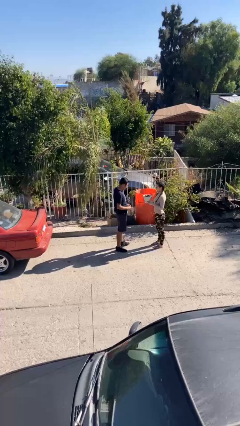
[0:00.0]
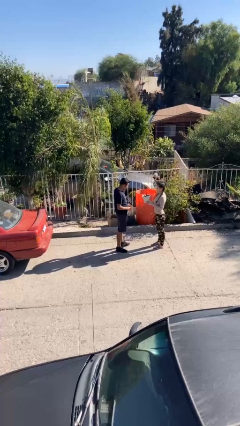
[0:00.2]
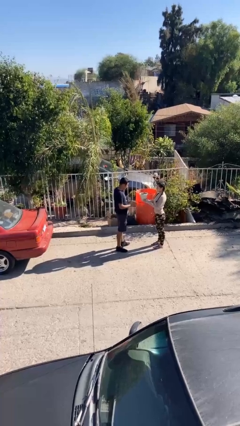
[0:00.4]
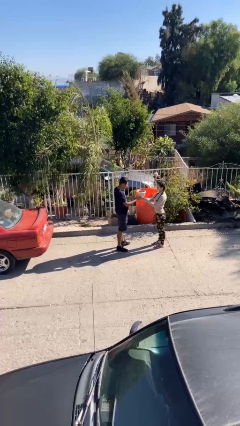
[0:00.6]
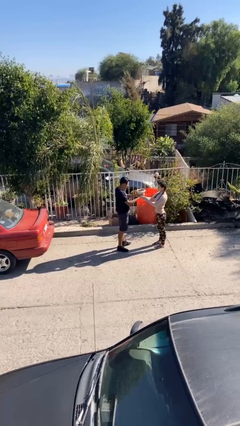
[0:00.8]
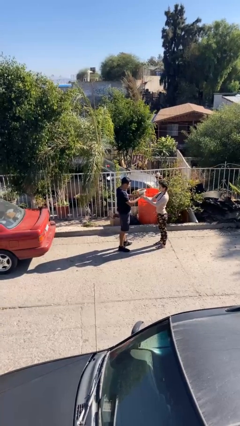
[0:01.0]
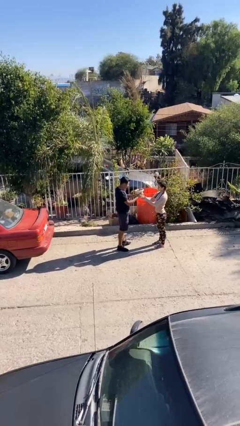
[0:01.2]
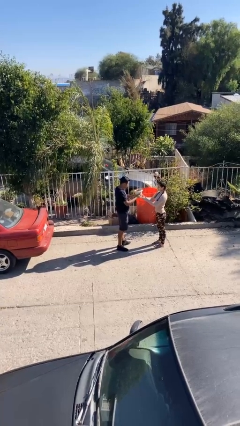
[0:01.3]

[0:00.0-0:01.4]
person transfers object to person

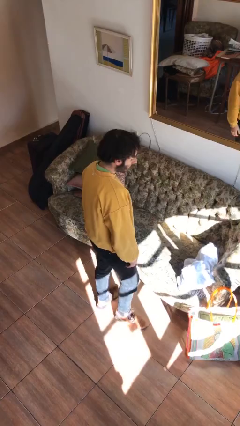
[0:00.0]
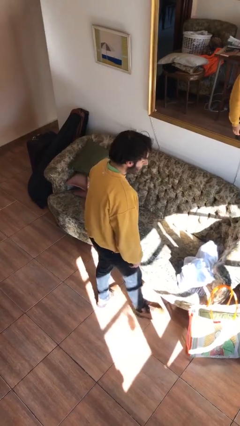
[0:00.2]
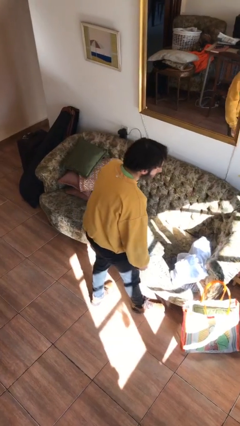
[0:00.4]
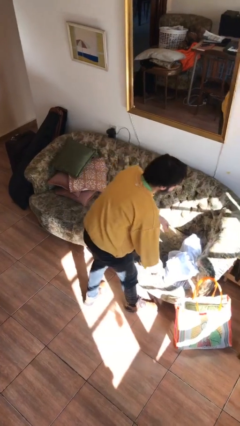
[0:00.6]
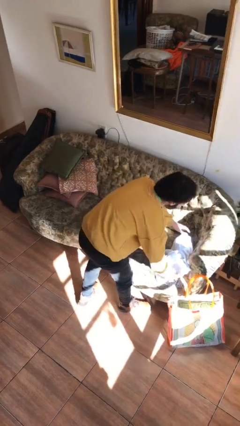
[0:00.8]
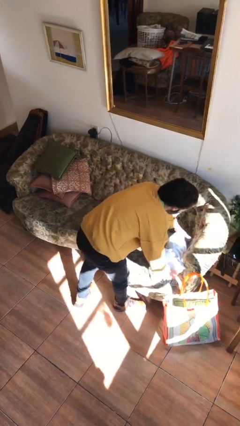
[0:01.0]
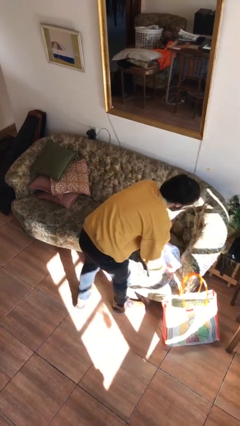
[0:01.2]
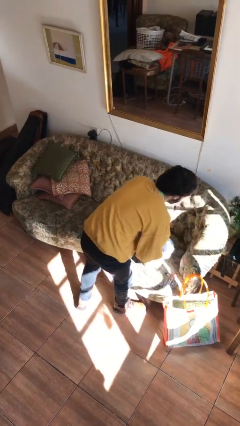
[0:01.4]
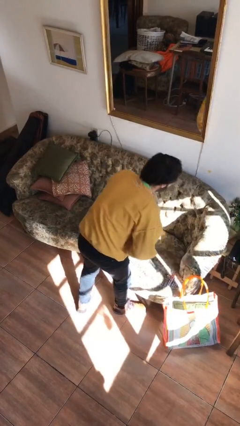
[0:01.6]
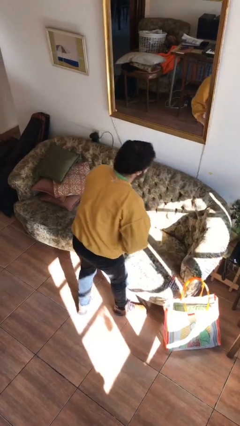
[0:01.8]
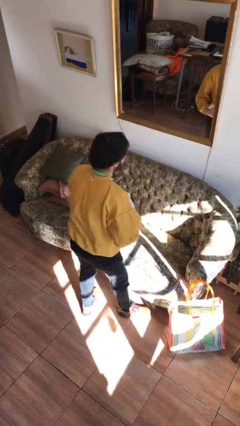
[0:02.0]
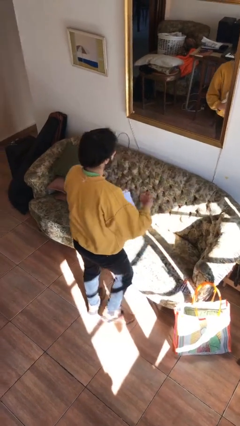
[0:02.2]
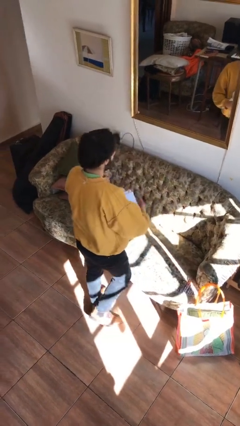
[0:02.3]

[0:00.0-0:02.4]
person picks up object from couch

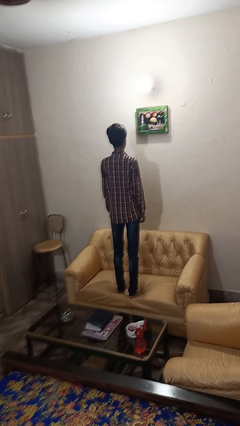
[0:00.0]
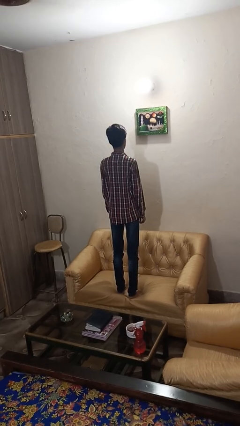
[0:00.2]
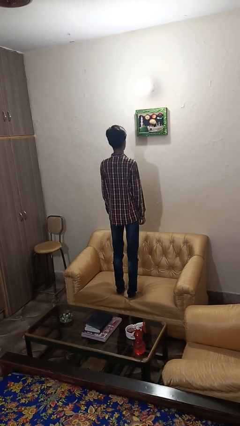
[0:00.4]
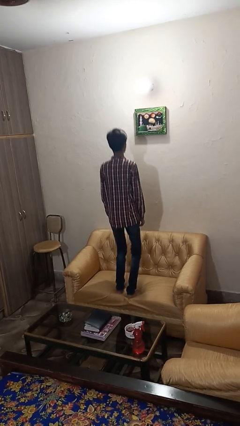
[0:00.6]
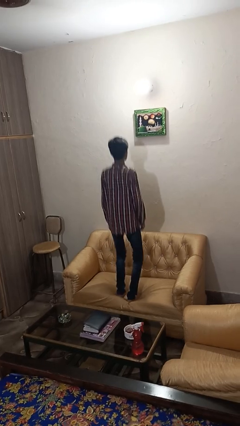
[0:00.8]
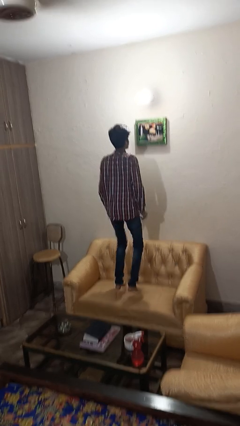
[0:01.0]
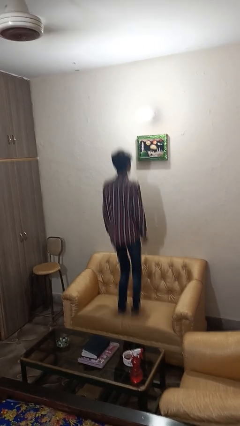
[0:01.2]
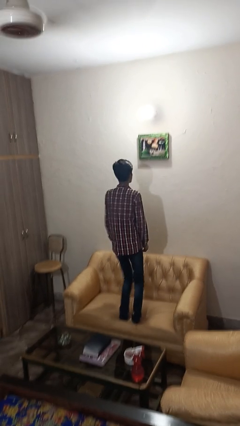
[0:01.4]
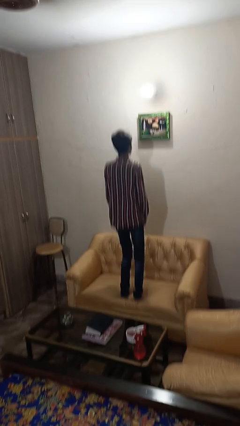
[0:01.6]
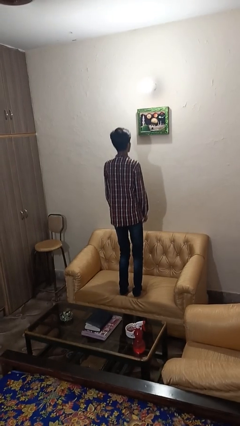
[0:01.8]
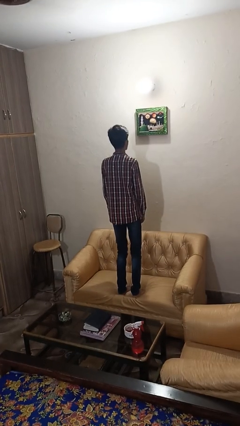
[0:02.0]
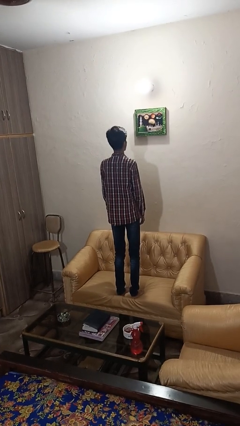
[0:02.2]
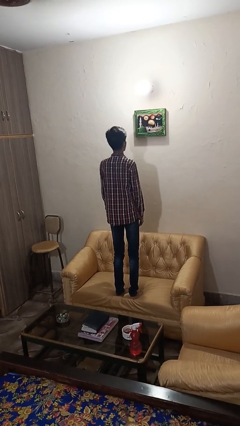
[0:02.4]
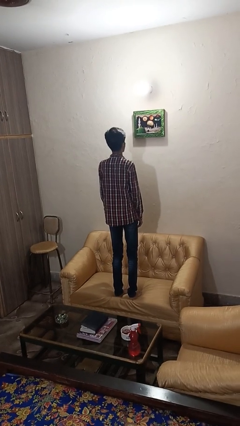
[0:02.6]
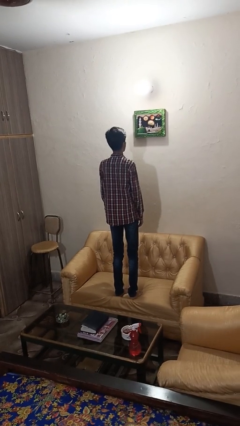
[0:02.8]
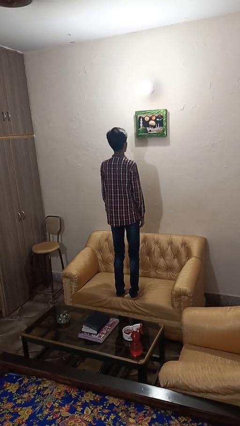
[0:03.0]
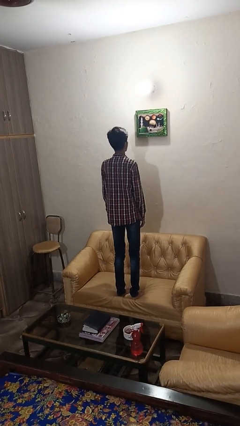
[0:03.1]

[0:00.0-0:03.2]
person jumps on couch

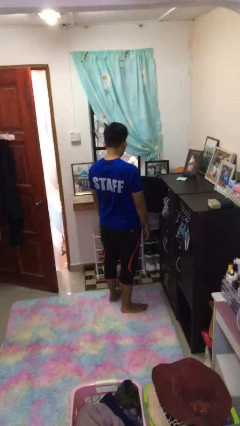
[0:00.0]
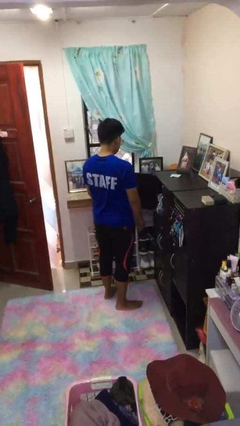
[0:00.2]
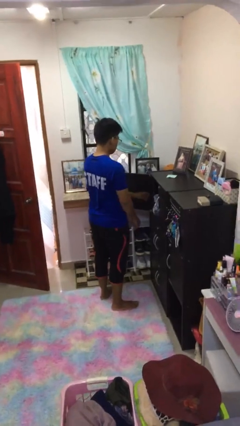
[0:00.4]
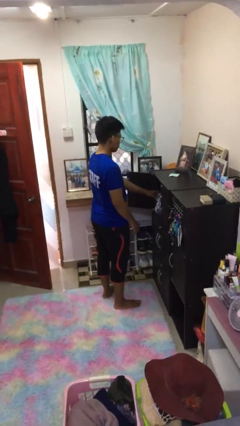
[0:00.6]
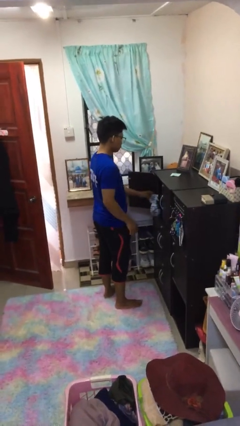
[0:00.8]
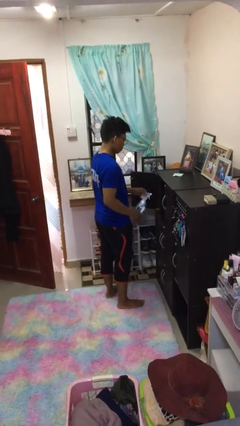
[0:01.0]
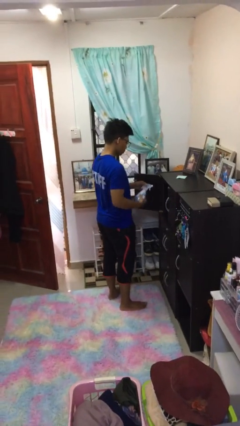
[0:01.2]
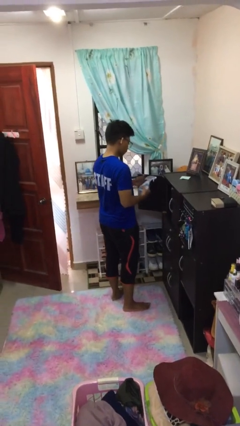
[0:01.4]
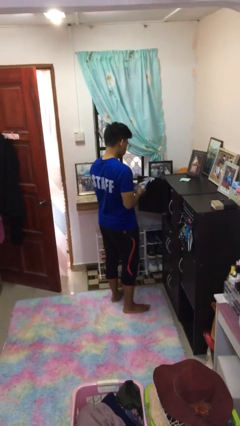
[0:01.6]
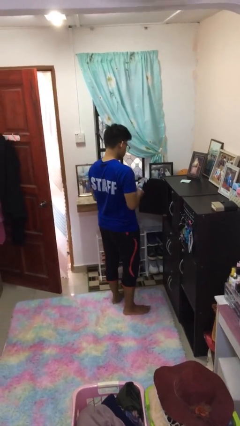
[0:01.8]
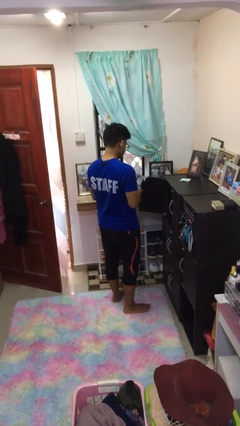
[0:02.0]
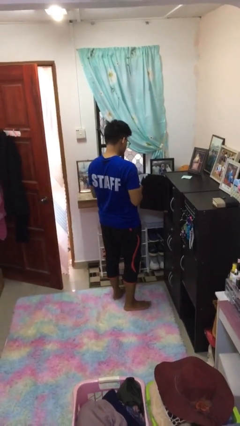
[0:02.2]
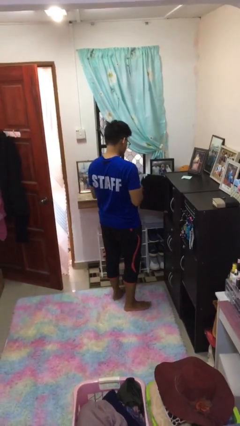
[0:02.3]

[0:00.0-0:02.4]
person picks up object from cabinet

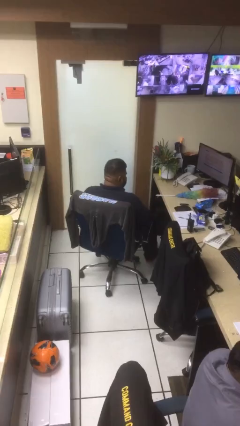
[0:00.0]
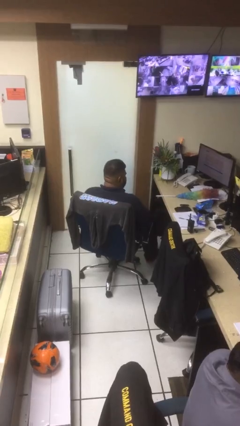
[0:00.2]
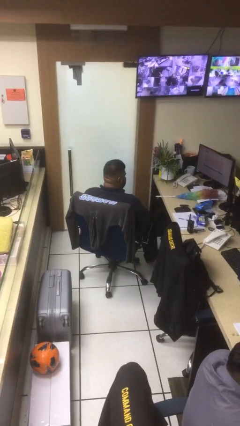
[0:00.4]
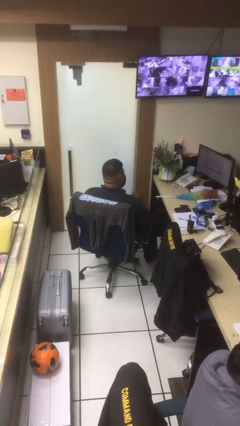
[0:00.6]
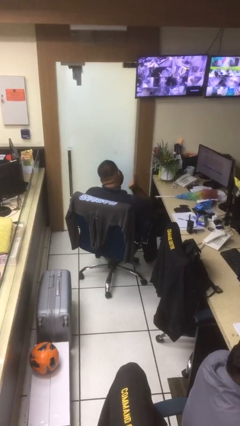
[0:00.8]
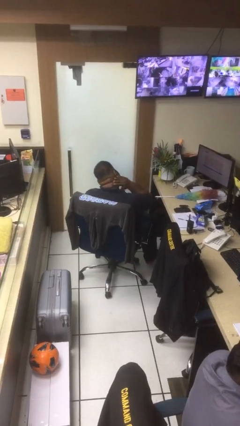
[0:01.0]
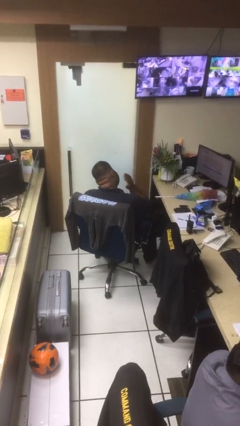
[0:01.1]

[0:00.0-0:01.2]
person swats bug

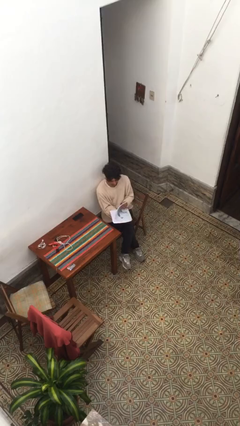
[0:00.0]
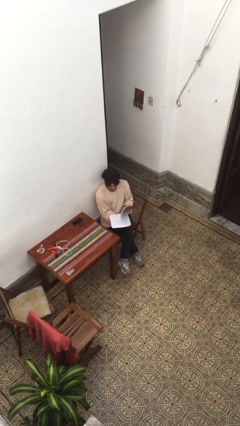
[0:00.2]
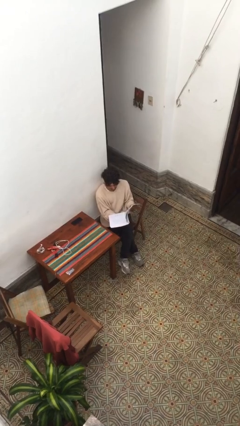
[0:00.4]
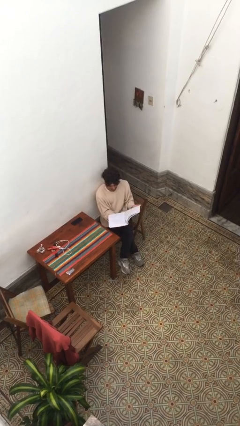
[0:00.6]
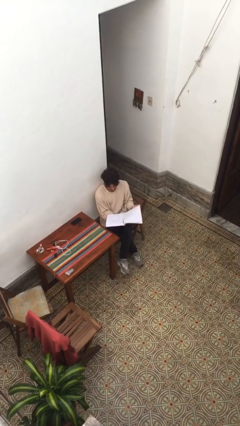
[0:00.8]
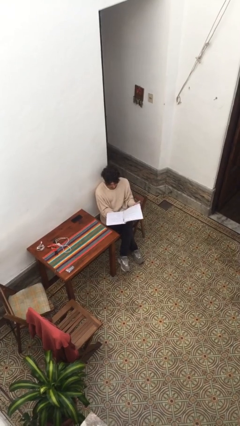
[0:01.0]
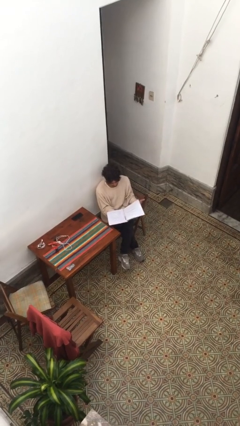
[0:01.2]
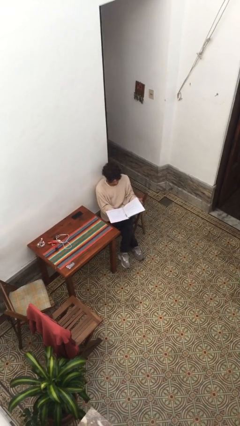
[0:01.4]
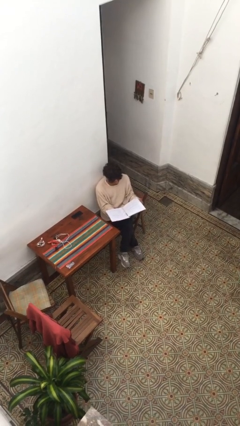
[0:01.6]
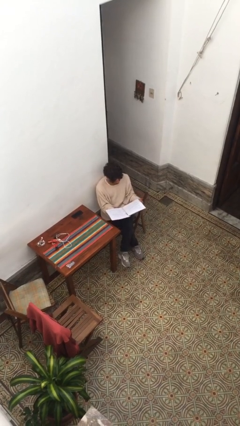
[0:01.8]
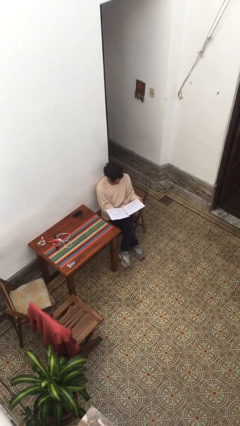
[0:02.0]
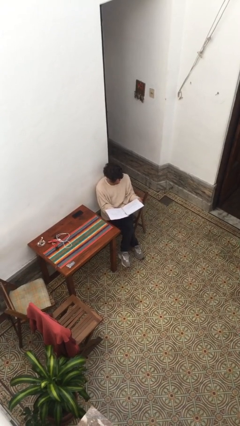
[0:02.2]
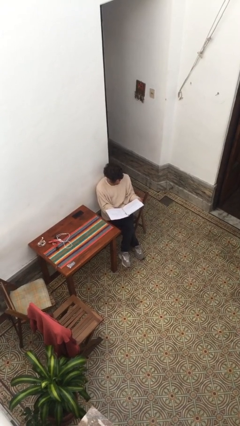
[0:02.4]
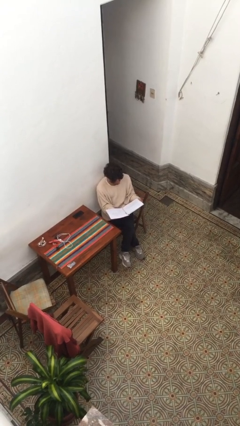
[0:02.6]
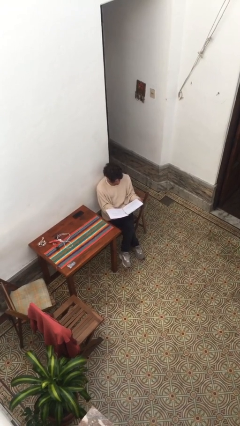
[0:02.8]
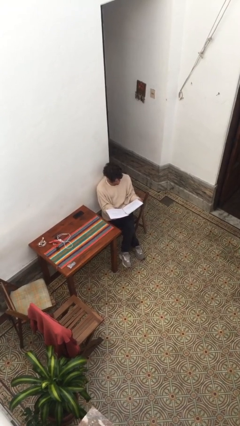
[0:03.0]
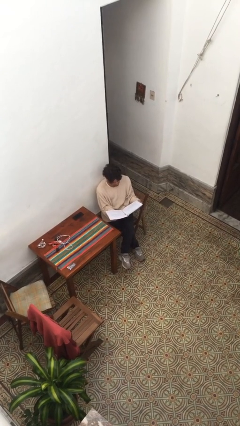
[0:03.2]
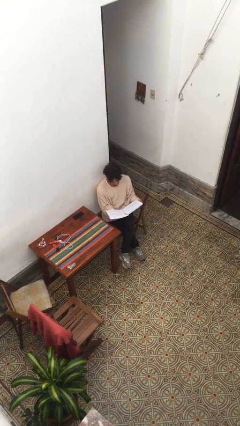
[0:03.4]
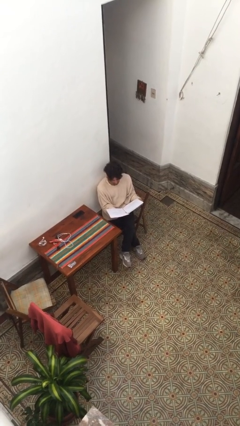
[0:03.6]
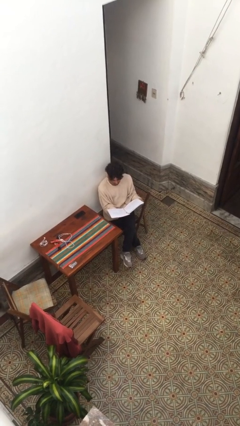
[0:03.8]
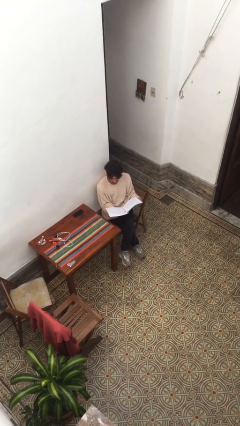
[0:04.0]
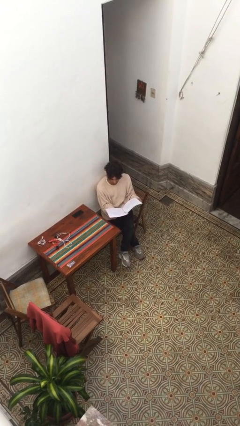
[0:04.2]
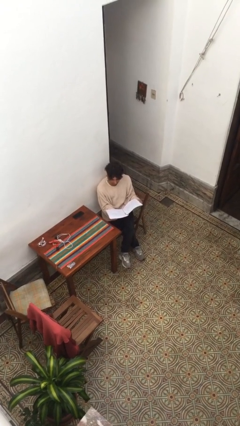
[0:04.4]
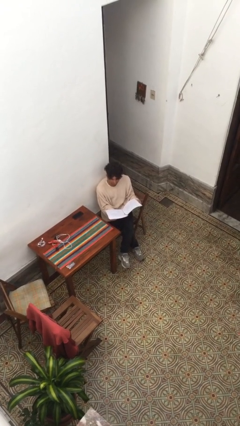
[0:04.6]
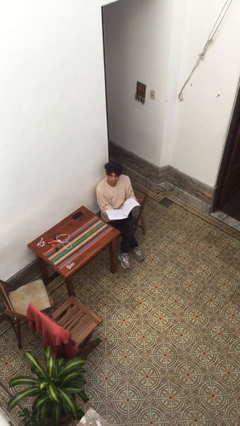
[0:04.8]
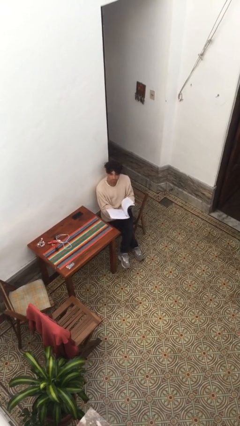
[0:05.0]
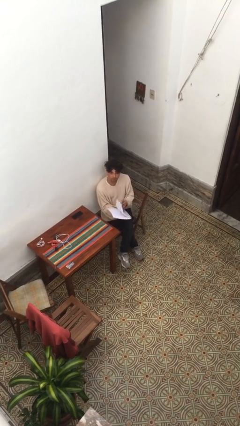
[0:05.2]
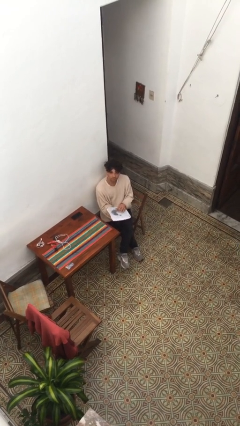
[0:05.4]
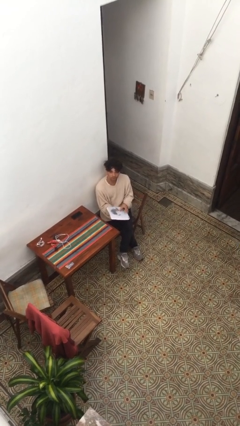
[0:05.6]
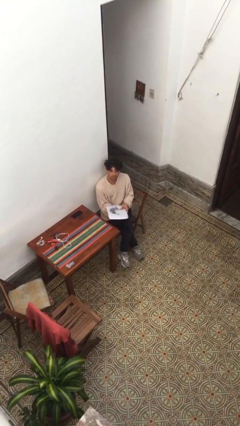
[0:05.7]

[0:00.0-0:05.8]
person reads document

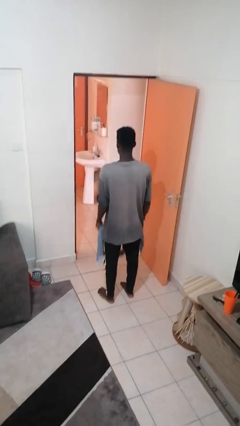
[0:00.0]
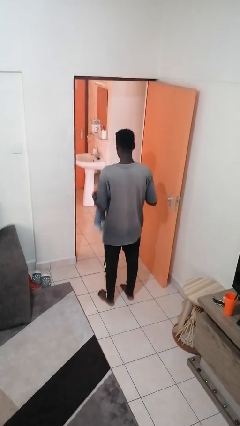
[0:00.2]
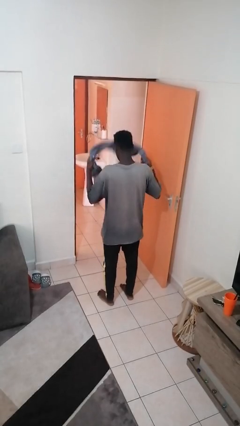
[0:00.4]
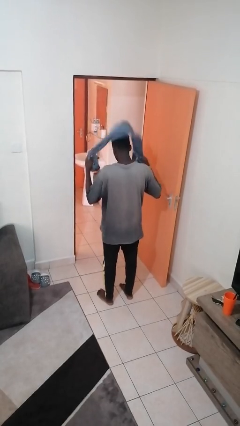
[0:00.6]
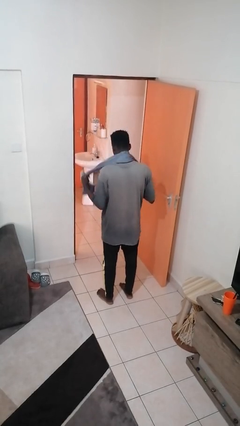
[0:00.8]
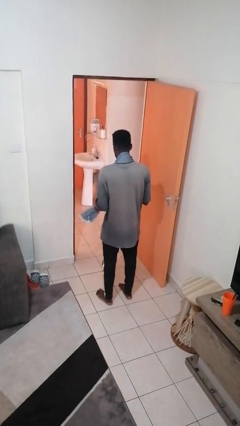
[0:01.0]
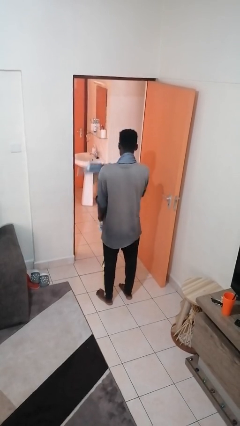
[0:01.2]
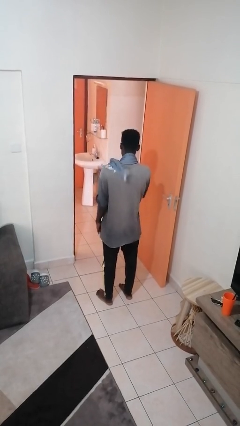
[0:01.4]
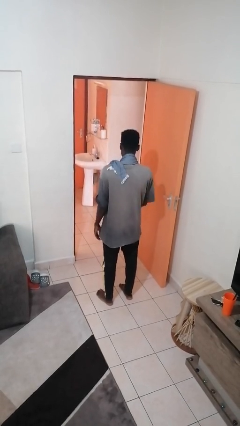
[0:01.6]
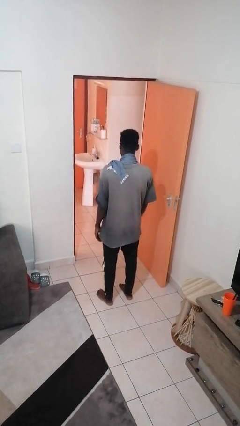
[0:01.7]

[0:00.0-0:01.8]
person puts on scarf
